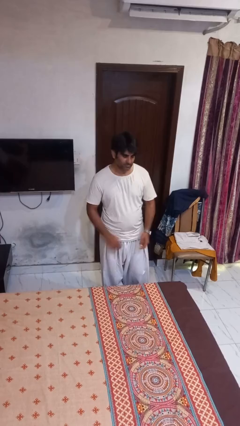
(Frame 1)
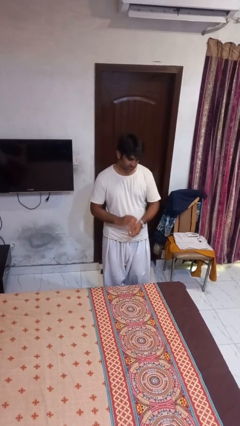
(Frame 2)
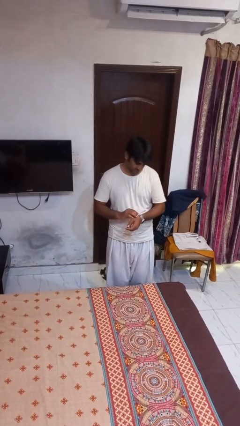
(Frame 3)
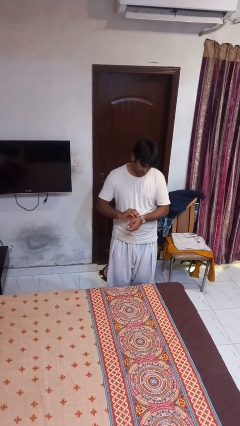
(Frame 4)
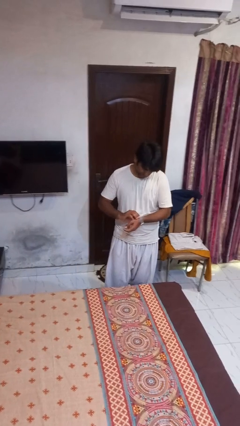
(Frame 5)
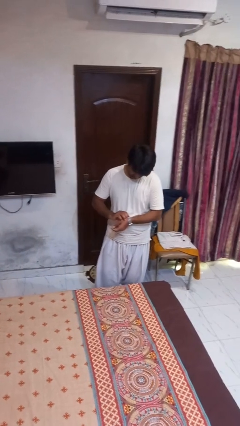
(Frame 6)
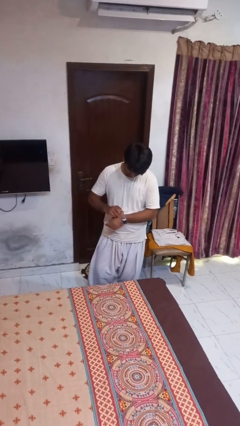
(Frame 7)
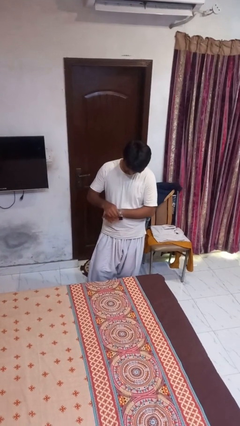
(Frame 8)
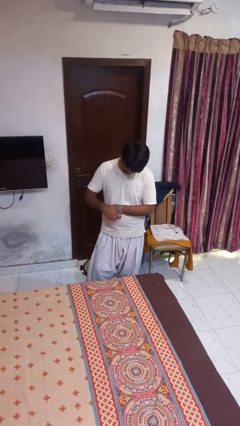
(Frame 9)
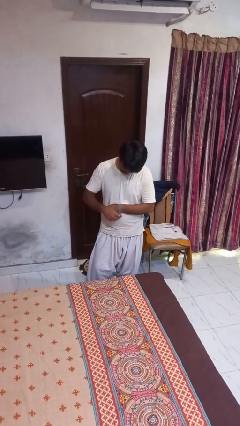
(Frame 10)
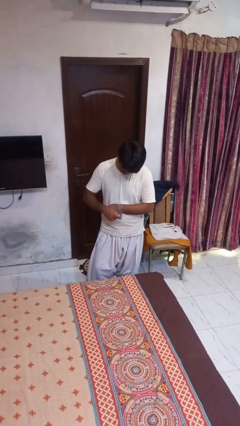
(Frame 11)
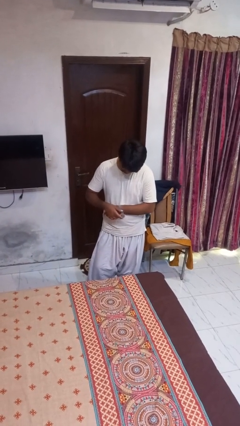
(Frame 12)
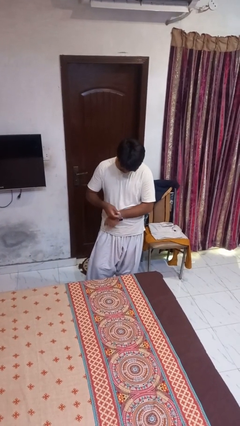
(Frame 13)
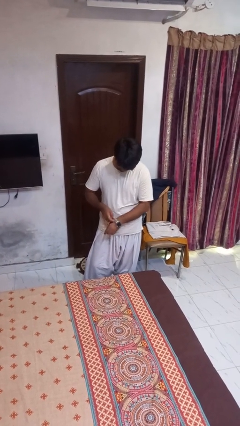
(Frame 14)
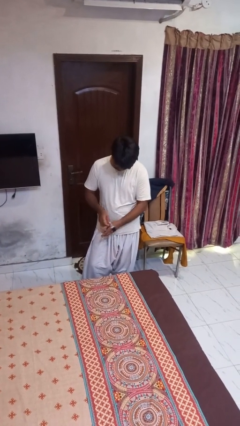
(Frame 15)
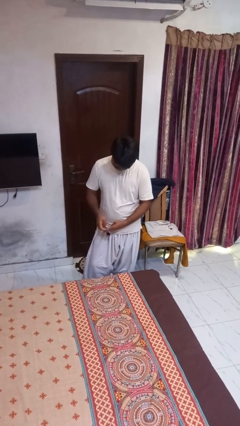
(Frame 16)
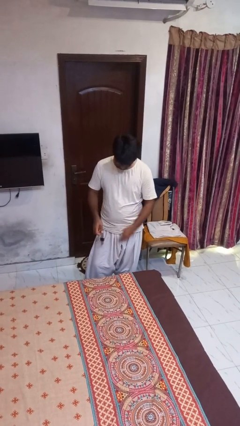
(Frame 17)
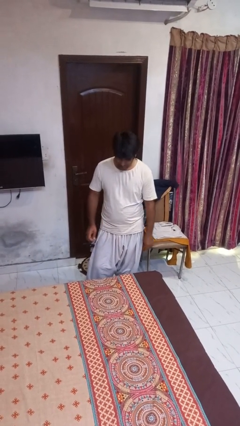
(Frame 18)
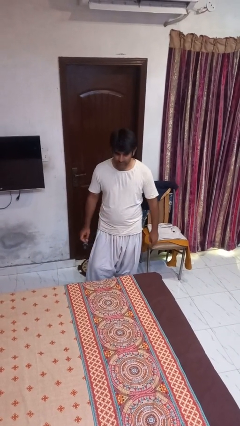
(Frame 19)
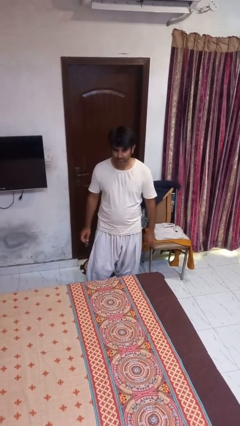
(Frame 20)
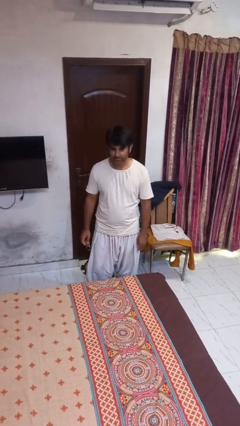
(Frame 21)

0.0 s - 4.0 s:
person takes off wristwatch

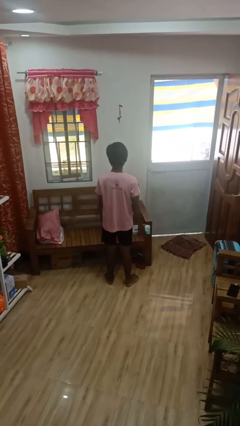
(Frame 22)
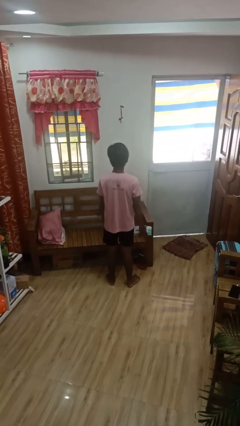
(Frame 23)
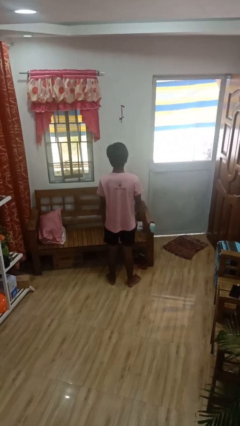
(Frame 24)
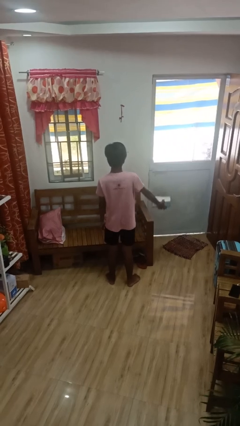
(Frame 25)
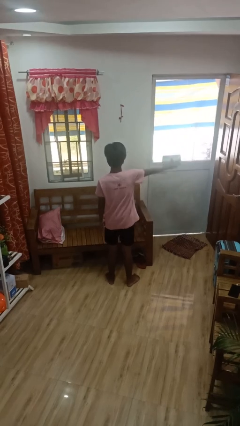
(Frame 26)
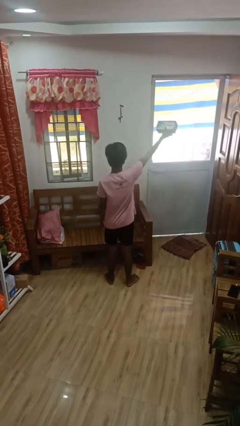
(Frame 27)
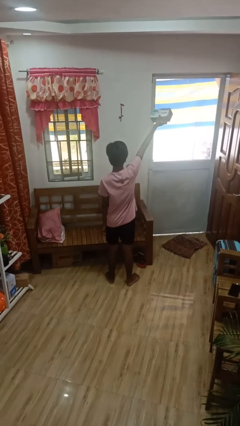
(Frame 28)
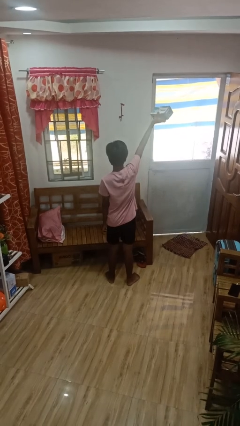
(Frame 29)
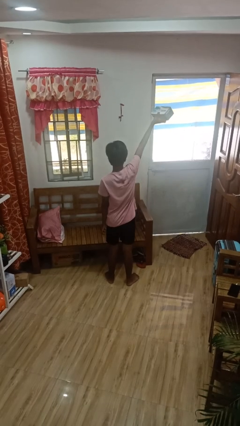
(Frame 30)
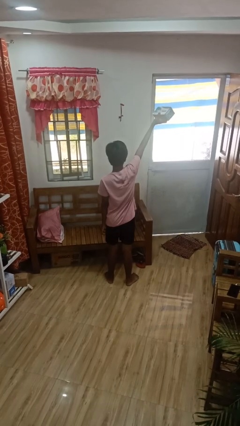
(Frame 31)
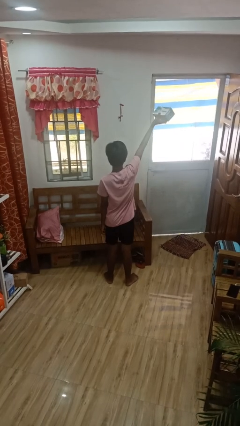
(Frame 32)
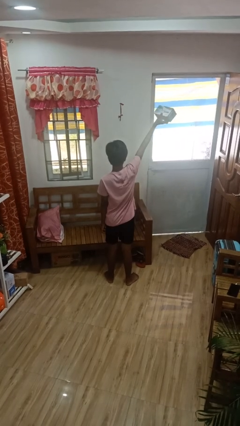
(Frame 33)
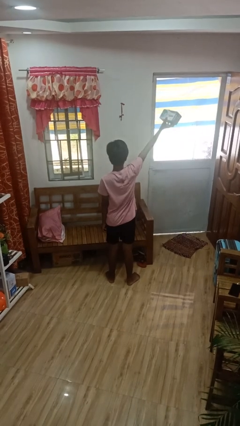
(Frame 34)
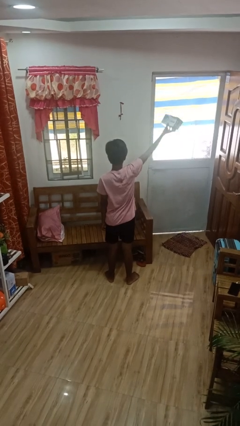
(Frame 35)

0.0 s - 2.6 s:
person holds object above head

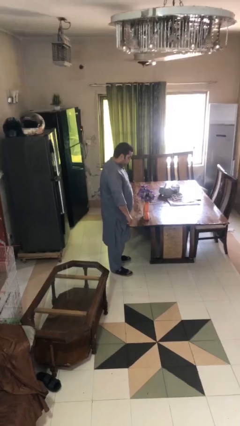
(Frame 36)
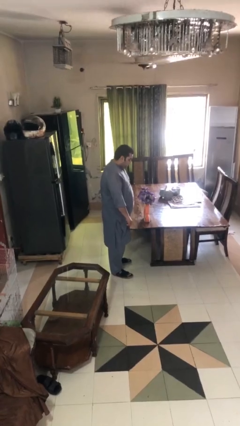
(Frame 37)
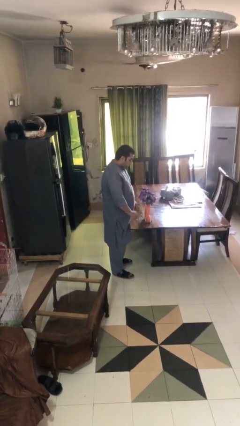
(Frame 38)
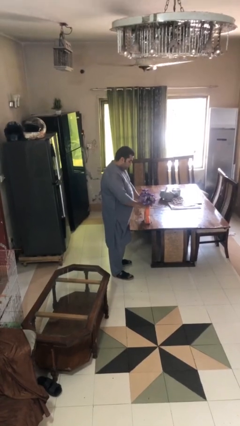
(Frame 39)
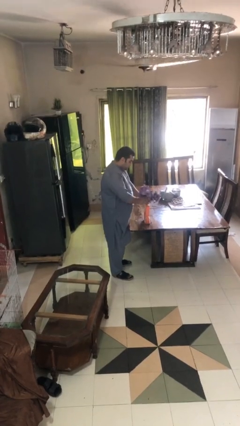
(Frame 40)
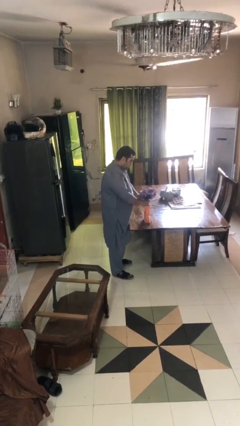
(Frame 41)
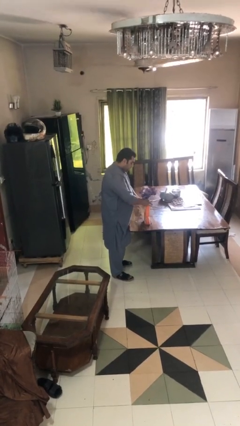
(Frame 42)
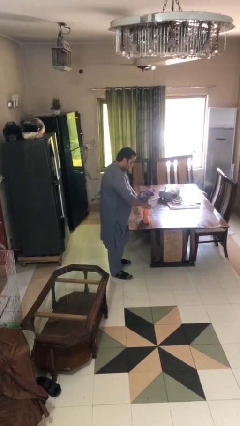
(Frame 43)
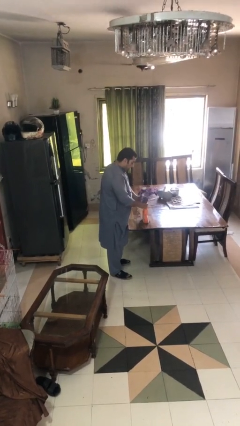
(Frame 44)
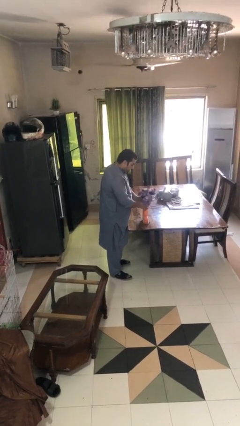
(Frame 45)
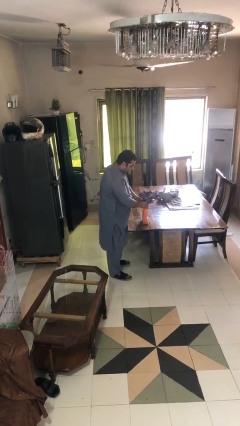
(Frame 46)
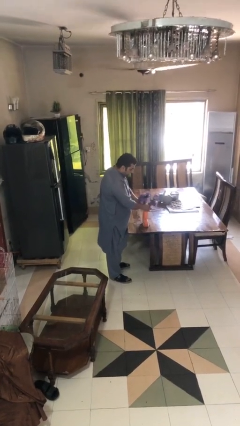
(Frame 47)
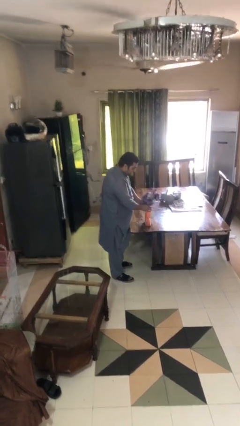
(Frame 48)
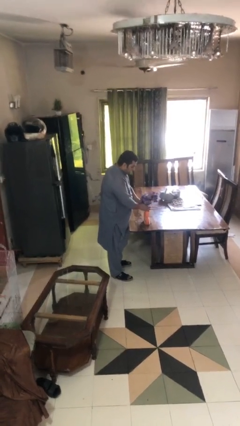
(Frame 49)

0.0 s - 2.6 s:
person arranges flowers in vase

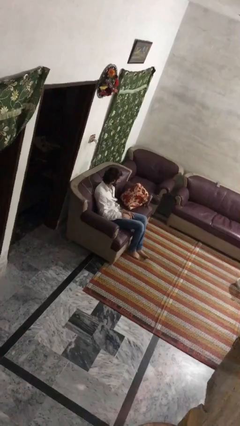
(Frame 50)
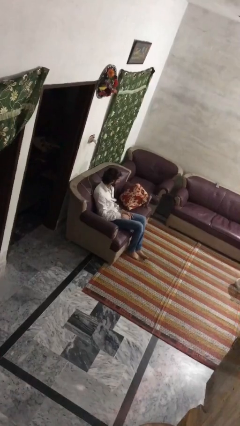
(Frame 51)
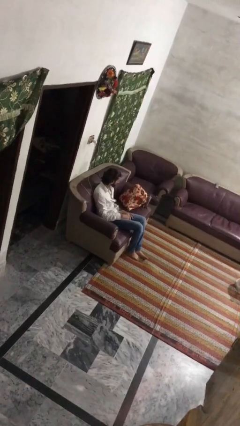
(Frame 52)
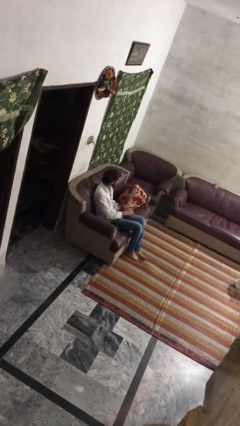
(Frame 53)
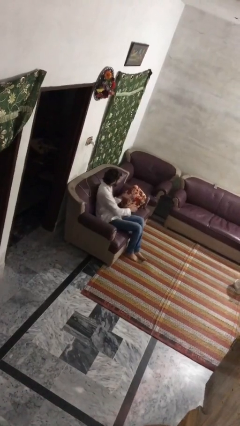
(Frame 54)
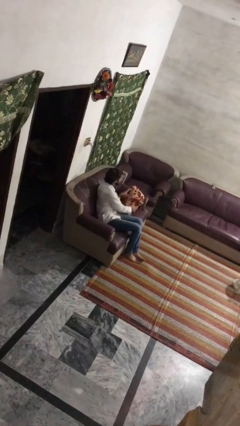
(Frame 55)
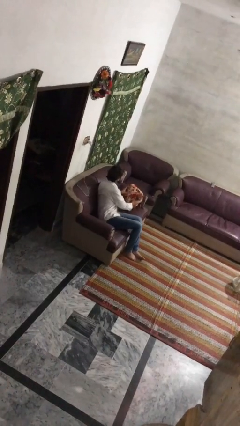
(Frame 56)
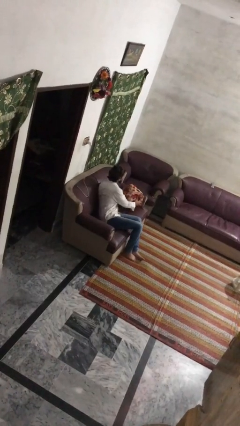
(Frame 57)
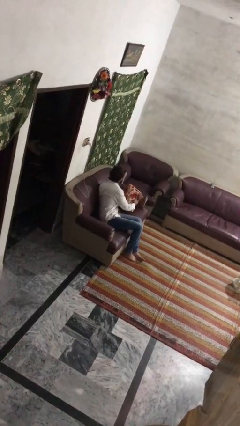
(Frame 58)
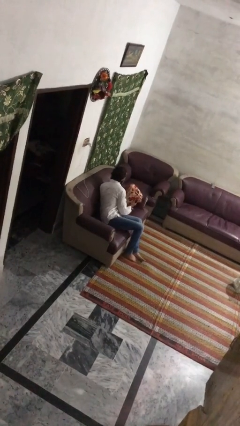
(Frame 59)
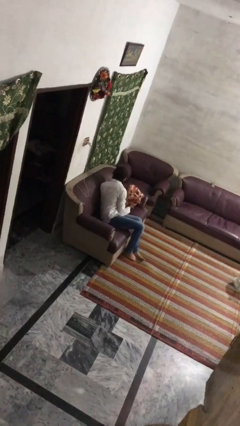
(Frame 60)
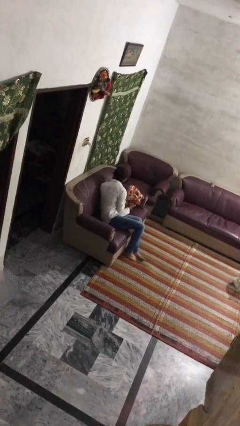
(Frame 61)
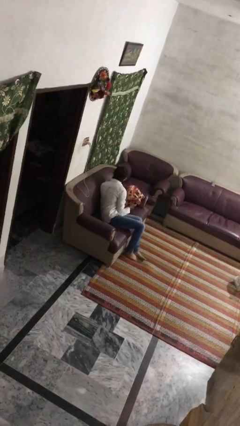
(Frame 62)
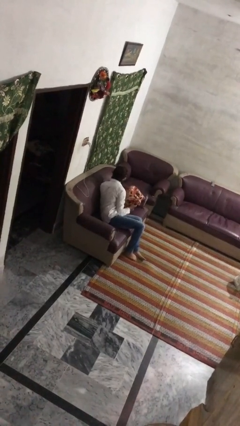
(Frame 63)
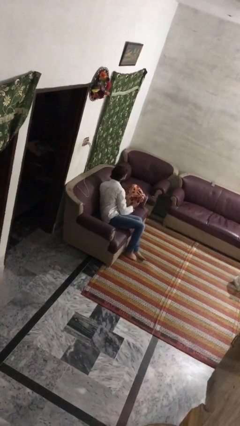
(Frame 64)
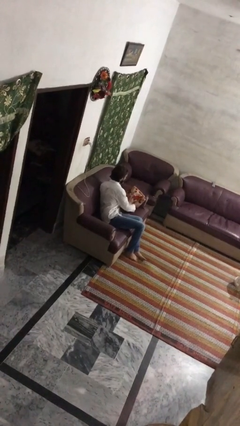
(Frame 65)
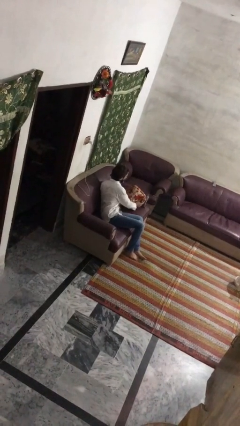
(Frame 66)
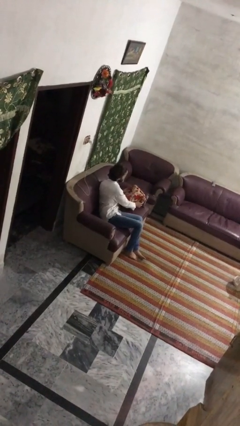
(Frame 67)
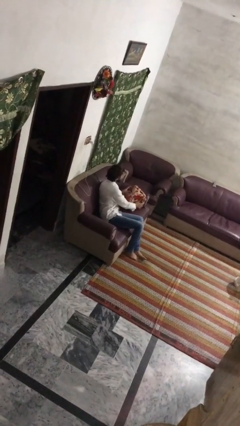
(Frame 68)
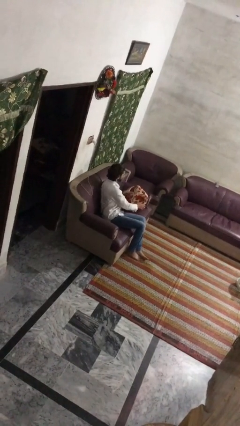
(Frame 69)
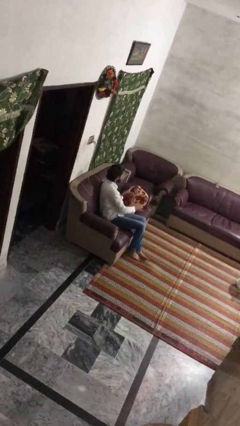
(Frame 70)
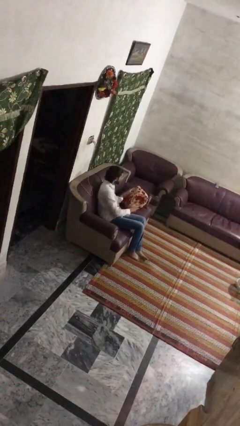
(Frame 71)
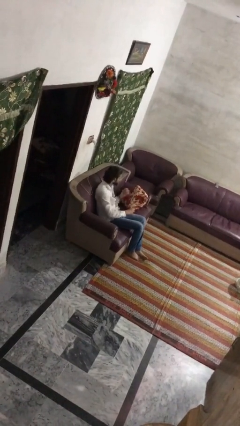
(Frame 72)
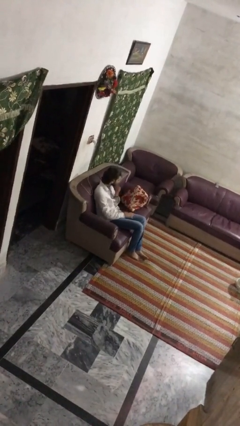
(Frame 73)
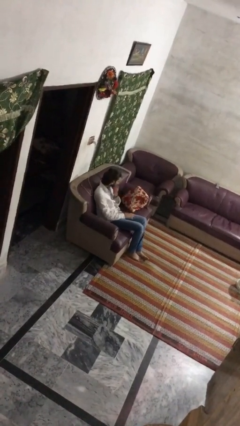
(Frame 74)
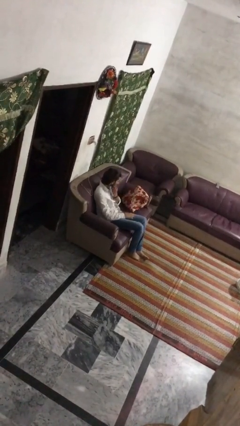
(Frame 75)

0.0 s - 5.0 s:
person searches in couch

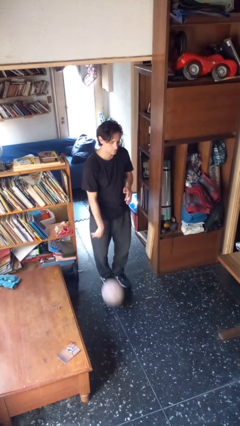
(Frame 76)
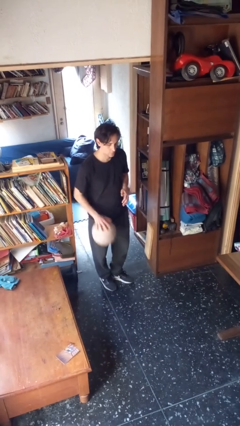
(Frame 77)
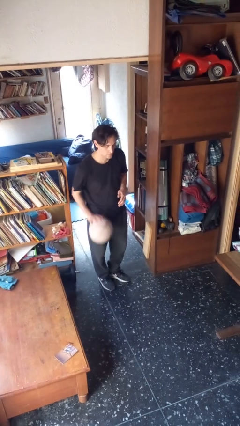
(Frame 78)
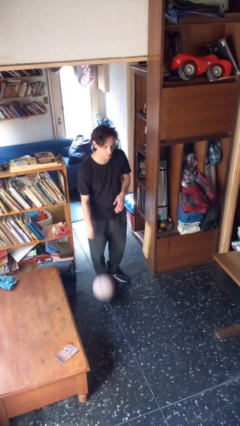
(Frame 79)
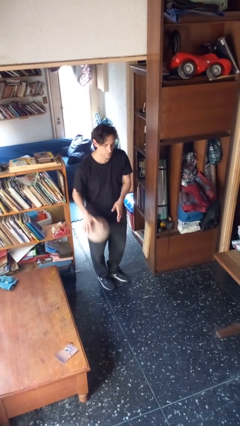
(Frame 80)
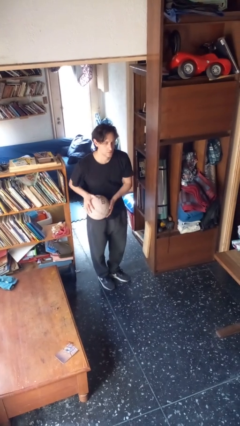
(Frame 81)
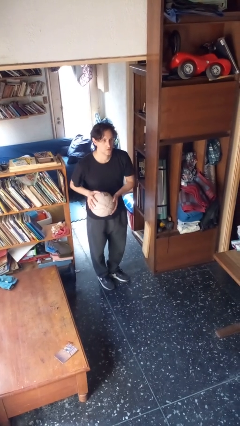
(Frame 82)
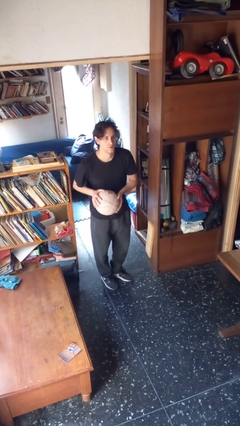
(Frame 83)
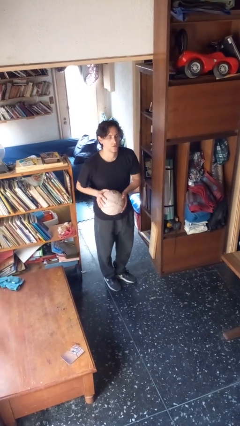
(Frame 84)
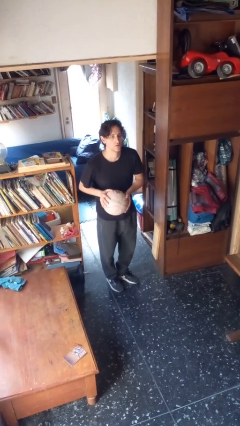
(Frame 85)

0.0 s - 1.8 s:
person bounces ball on floor

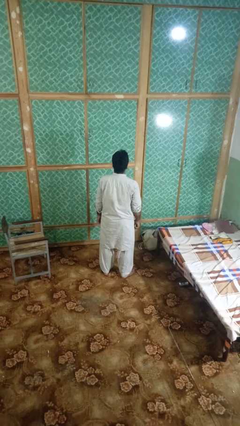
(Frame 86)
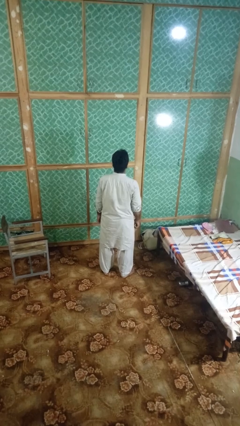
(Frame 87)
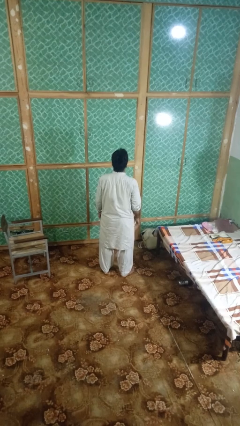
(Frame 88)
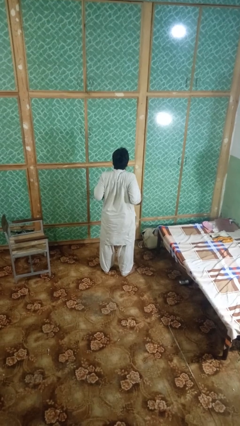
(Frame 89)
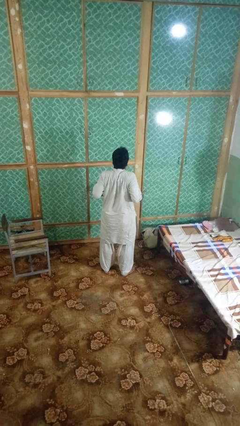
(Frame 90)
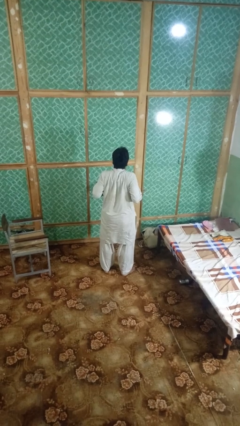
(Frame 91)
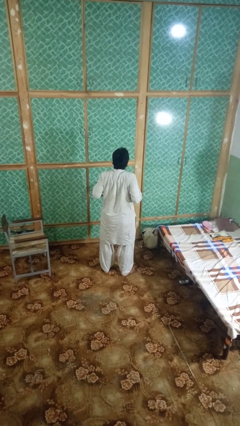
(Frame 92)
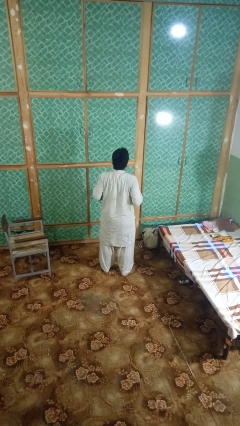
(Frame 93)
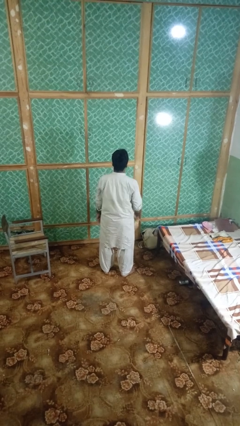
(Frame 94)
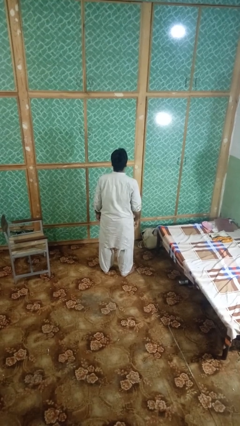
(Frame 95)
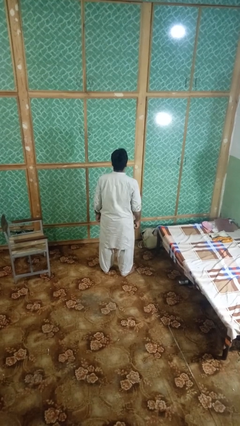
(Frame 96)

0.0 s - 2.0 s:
person shrugs
